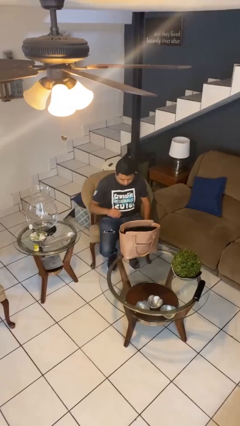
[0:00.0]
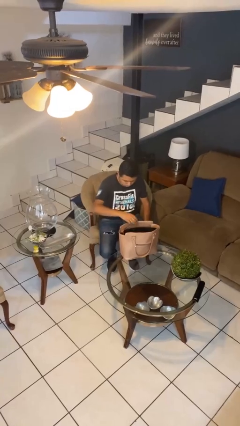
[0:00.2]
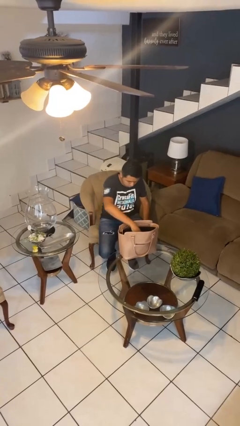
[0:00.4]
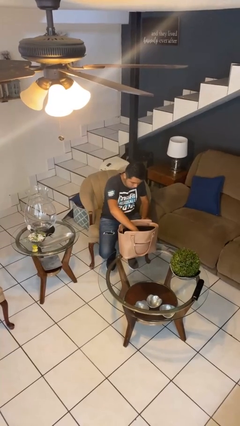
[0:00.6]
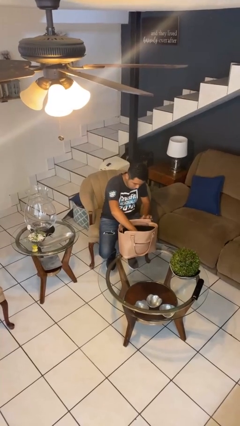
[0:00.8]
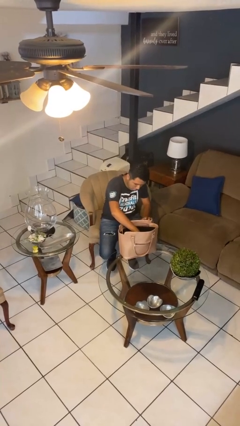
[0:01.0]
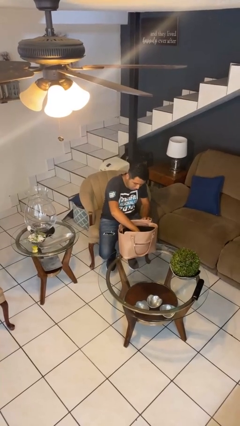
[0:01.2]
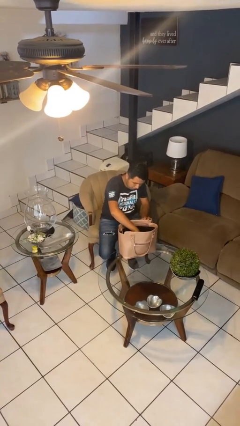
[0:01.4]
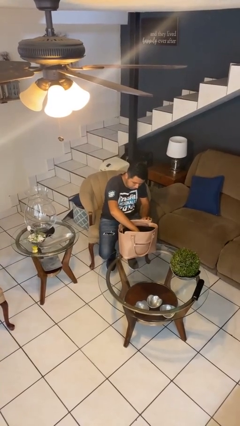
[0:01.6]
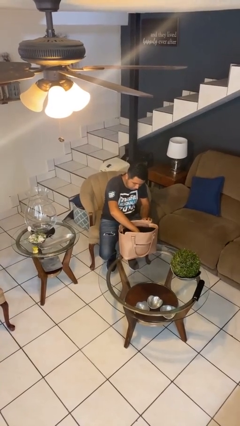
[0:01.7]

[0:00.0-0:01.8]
person searches in purse

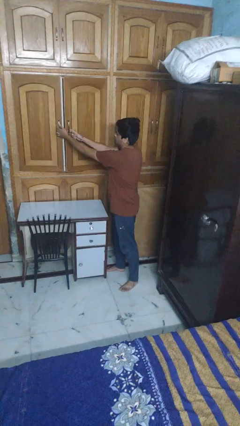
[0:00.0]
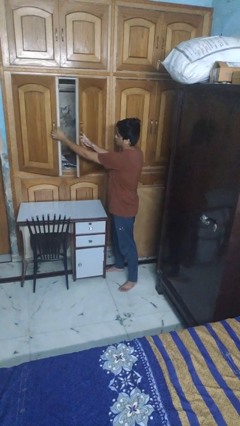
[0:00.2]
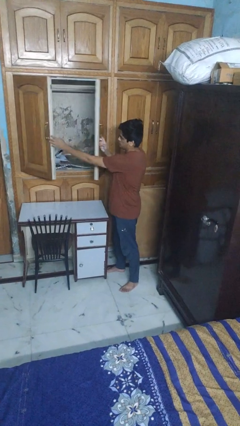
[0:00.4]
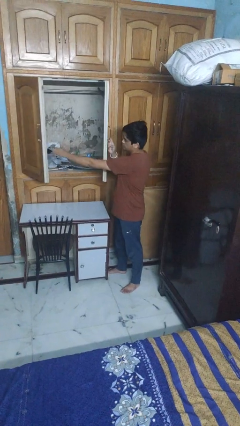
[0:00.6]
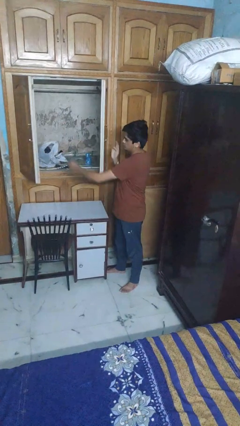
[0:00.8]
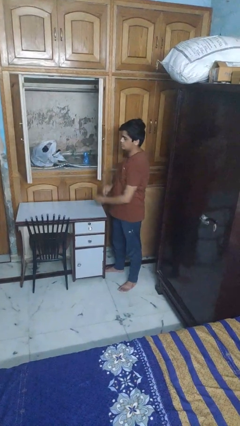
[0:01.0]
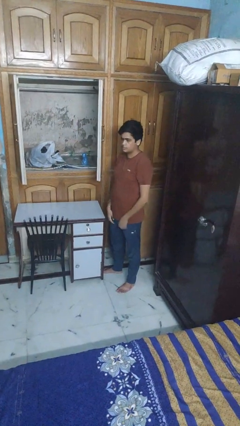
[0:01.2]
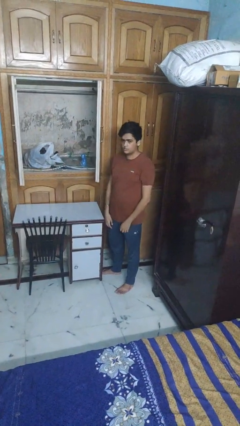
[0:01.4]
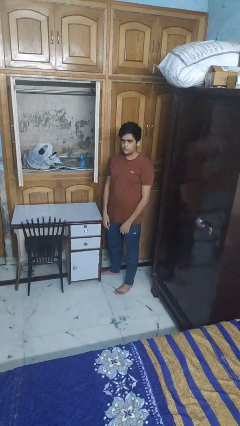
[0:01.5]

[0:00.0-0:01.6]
person opens closet door

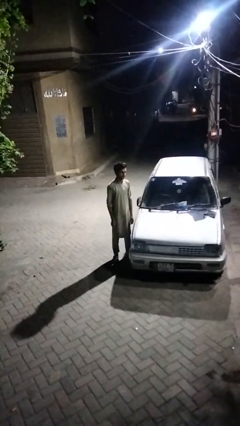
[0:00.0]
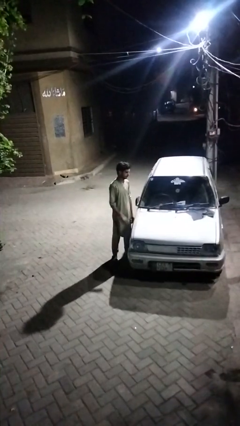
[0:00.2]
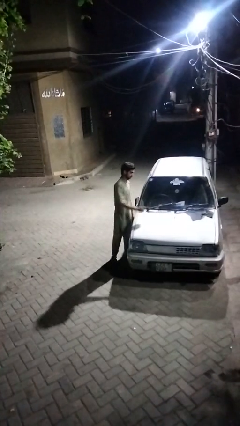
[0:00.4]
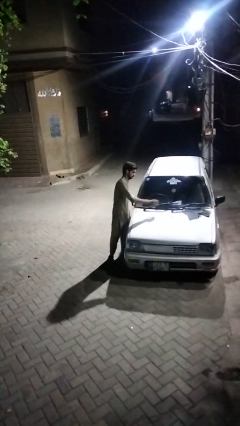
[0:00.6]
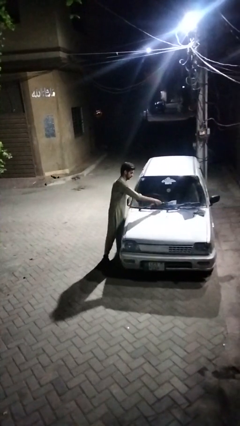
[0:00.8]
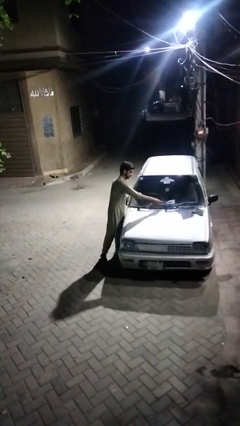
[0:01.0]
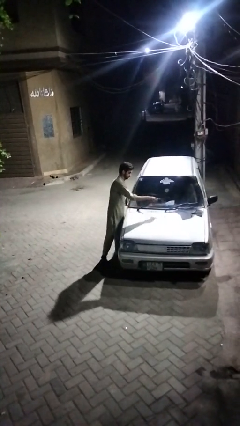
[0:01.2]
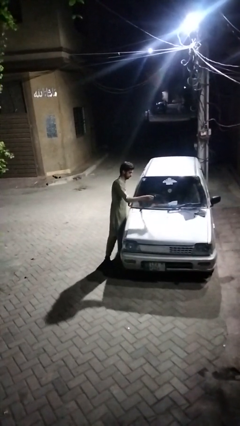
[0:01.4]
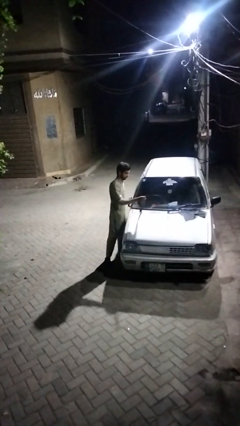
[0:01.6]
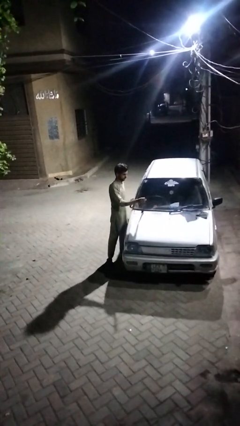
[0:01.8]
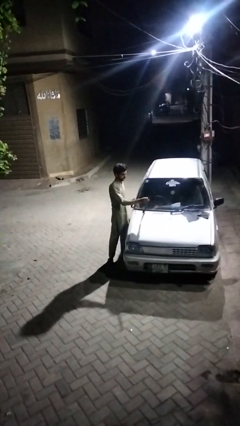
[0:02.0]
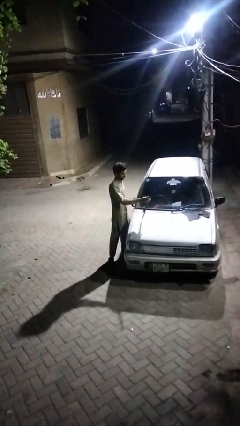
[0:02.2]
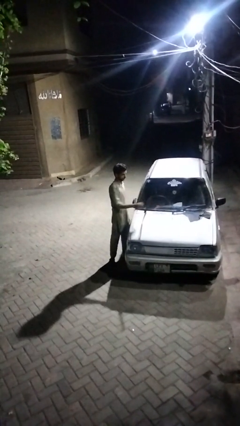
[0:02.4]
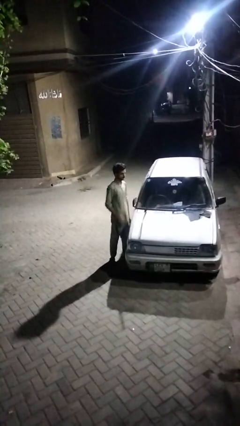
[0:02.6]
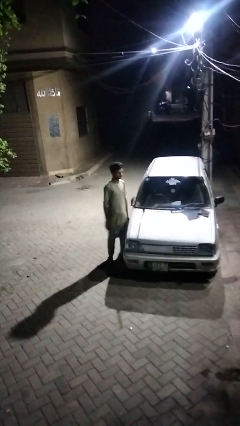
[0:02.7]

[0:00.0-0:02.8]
person flips up car wipers

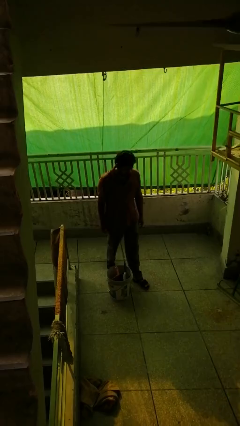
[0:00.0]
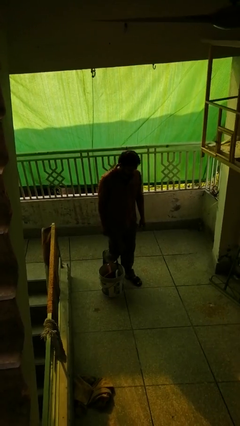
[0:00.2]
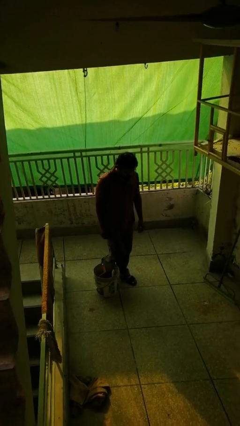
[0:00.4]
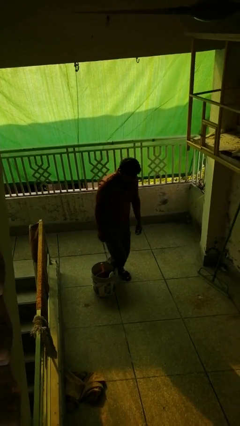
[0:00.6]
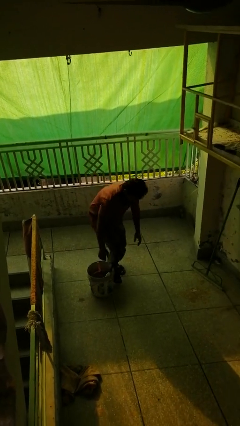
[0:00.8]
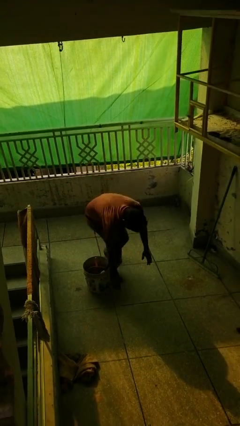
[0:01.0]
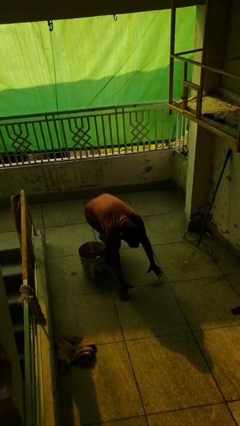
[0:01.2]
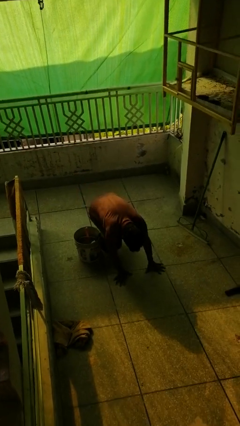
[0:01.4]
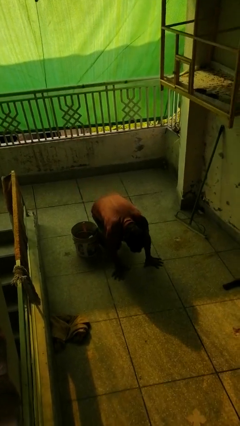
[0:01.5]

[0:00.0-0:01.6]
person trips on object on floor

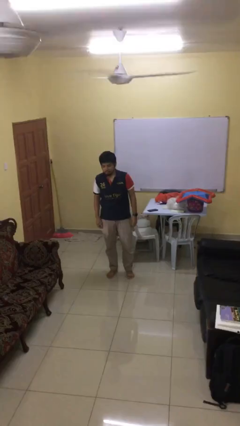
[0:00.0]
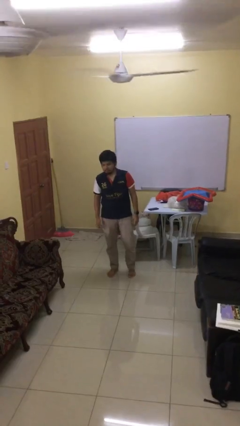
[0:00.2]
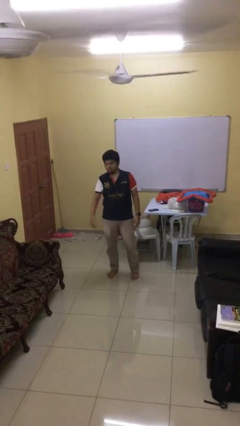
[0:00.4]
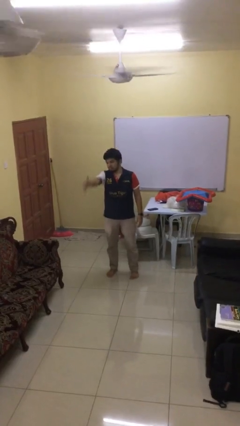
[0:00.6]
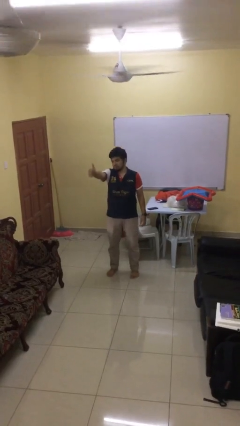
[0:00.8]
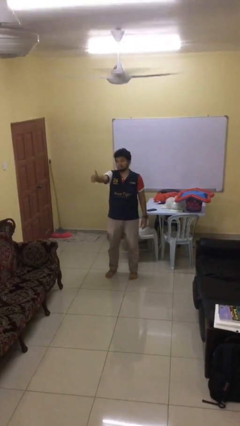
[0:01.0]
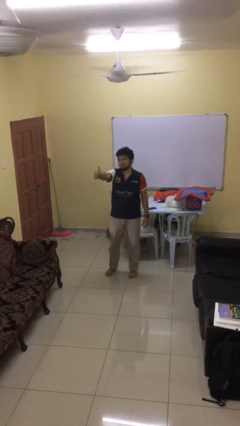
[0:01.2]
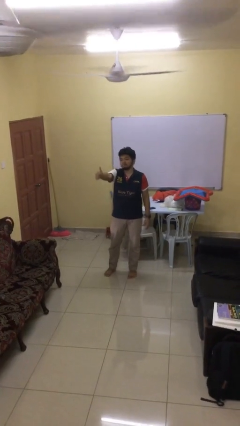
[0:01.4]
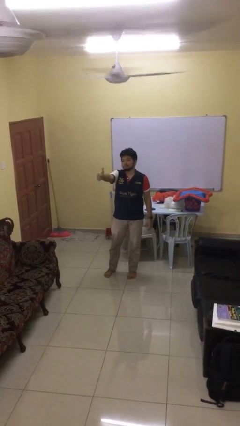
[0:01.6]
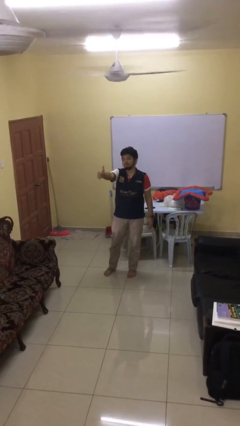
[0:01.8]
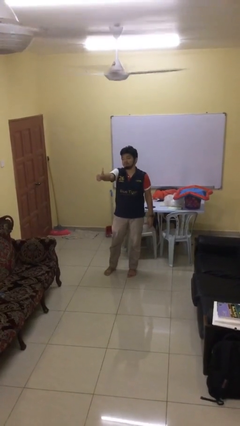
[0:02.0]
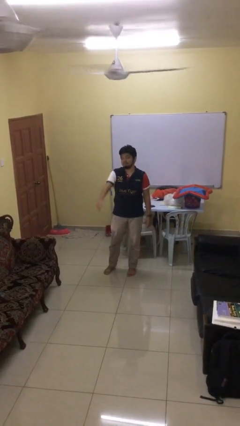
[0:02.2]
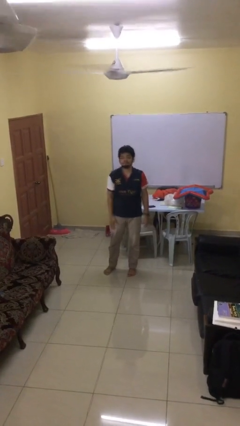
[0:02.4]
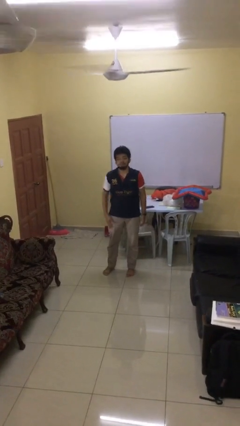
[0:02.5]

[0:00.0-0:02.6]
person gestures thumbs up

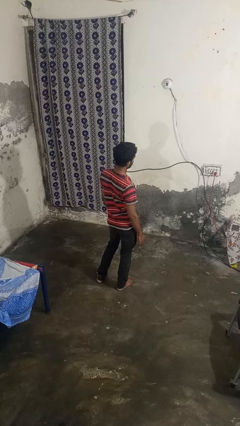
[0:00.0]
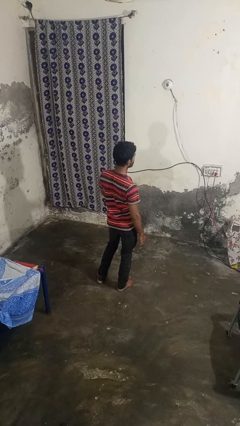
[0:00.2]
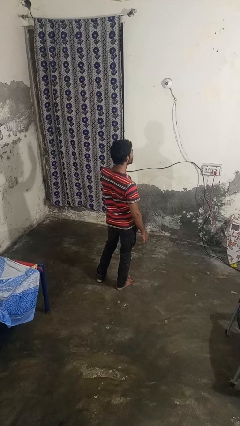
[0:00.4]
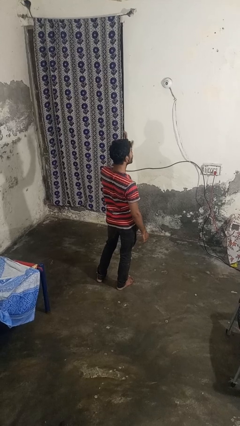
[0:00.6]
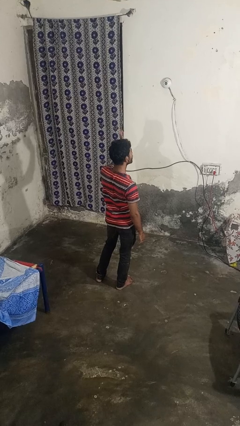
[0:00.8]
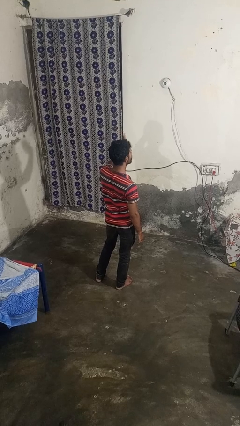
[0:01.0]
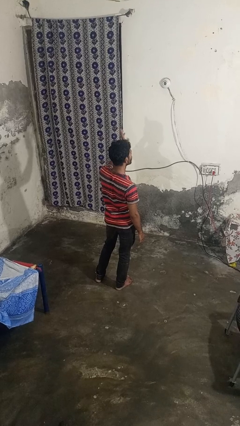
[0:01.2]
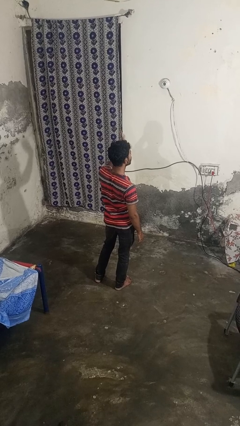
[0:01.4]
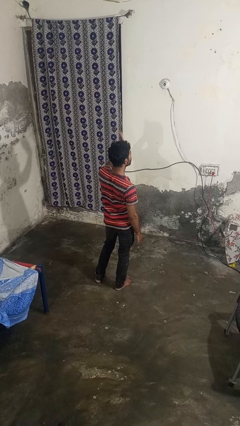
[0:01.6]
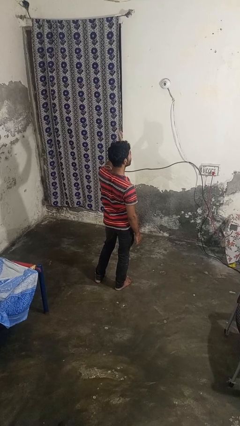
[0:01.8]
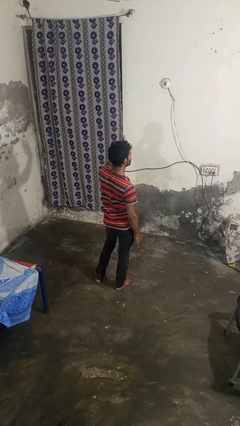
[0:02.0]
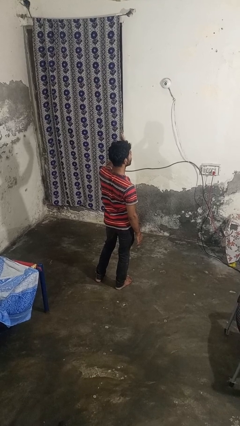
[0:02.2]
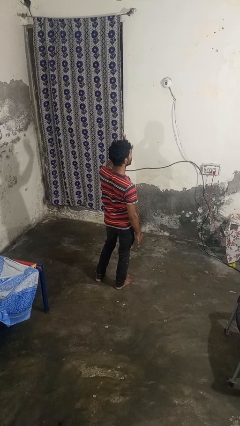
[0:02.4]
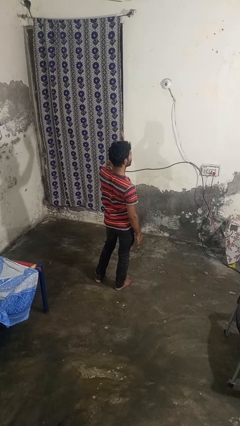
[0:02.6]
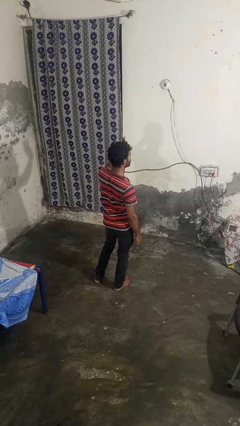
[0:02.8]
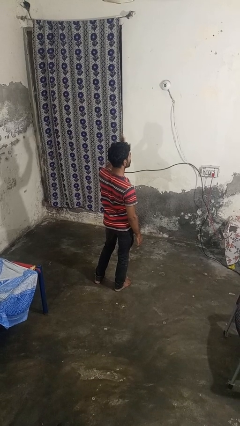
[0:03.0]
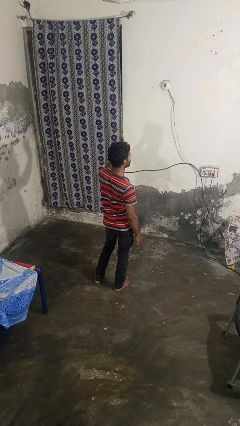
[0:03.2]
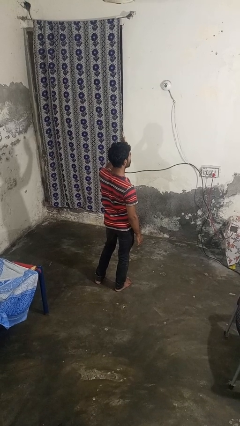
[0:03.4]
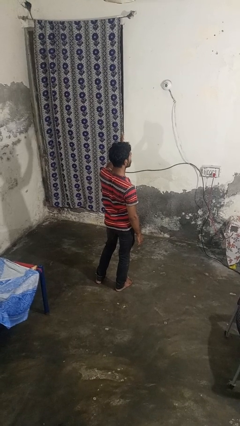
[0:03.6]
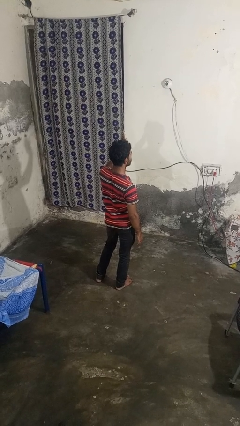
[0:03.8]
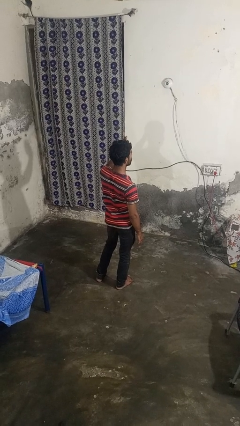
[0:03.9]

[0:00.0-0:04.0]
person waves at person

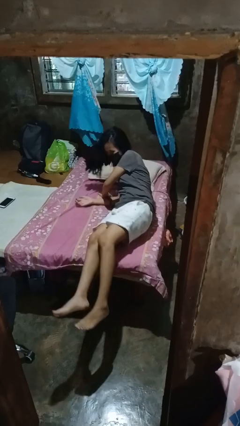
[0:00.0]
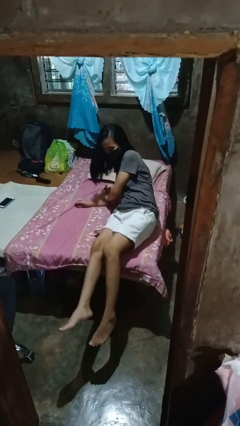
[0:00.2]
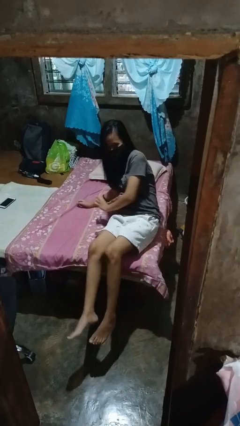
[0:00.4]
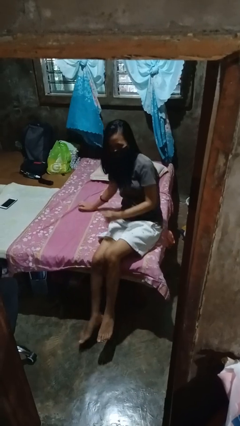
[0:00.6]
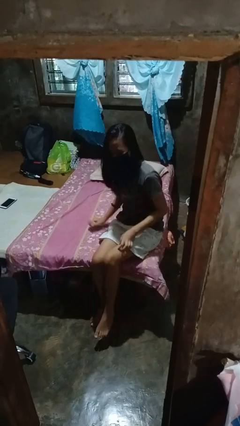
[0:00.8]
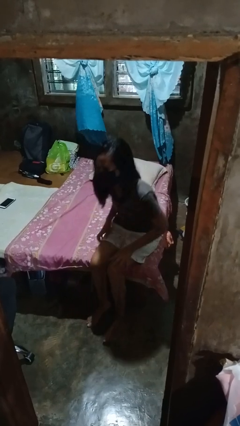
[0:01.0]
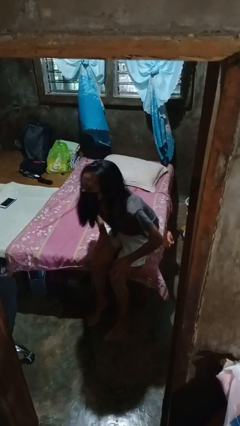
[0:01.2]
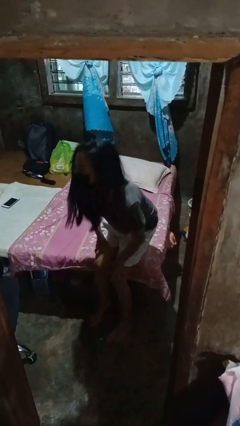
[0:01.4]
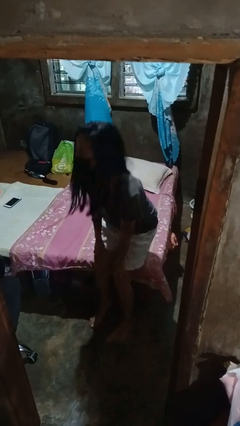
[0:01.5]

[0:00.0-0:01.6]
person stands up

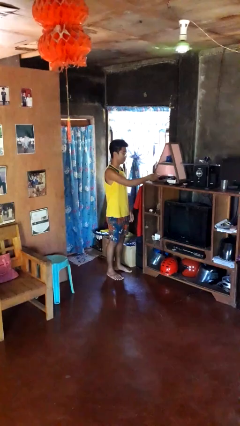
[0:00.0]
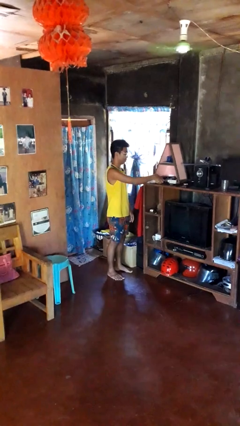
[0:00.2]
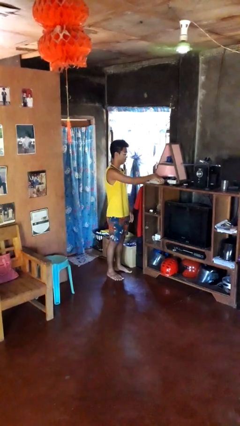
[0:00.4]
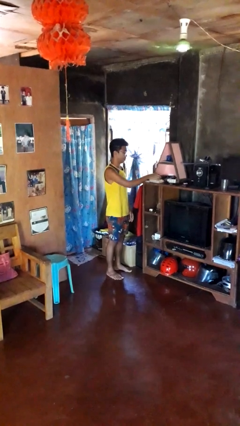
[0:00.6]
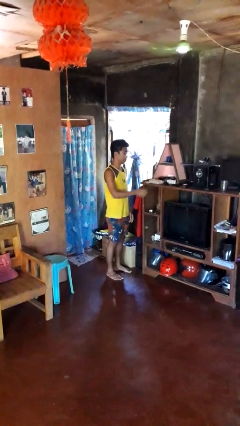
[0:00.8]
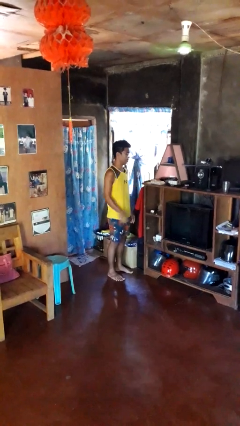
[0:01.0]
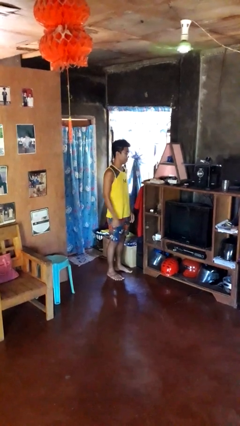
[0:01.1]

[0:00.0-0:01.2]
person puts down object on shelf
